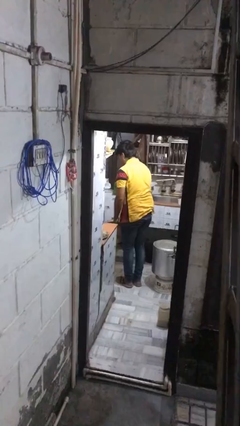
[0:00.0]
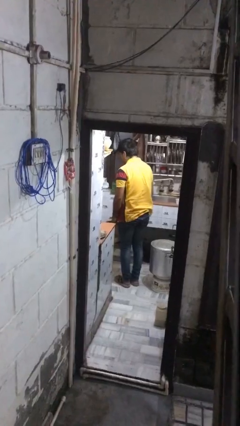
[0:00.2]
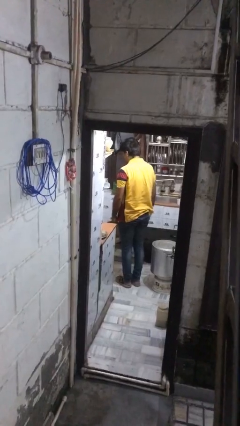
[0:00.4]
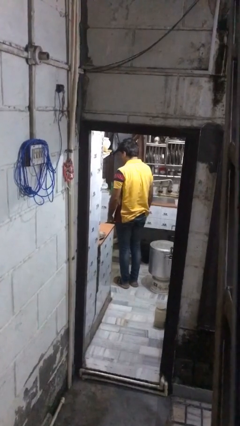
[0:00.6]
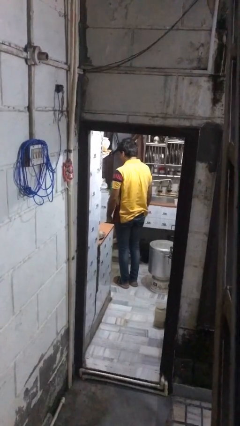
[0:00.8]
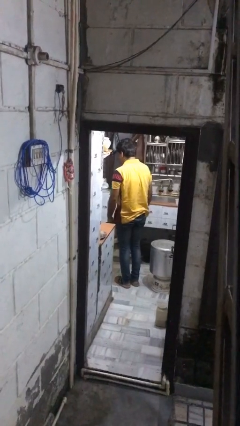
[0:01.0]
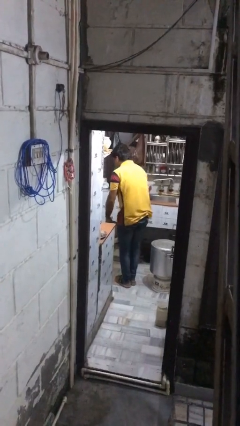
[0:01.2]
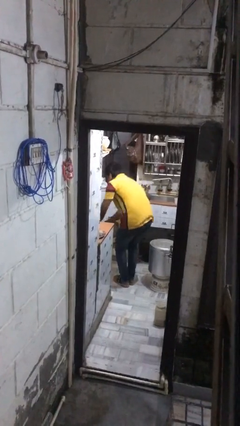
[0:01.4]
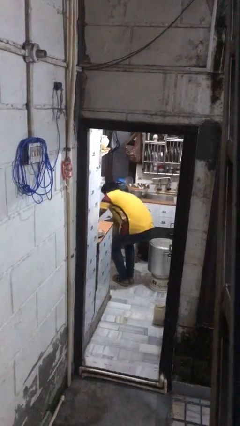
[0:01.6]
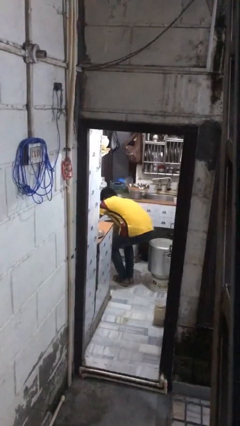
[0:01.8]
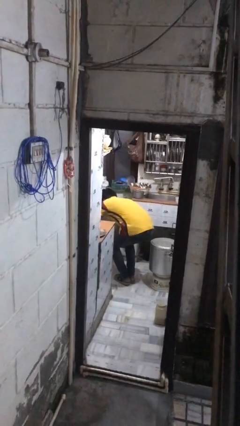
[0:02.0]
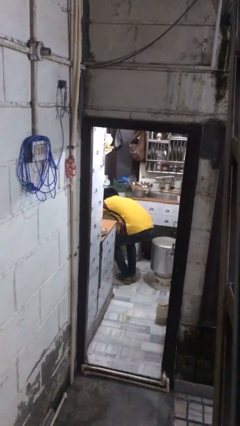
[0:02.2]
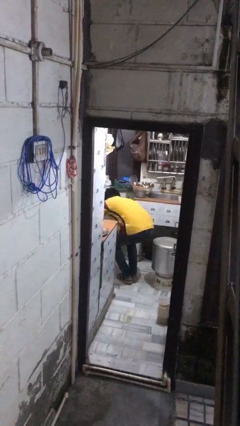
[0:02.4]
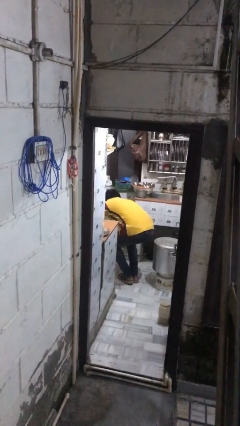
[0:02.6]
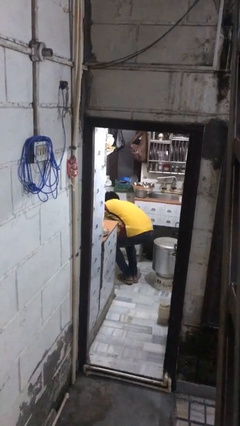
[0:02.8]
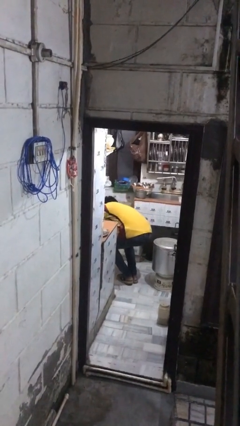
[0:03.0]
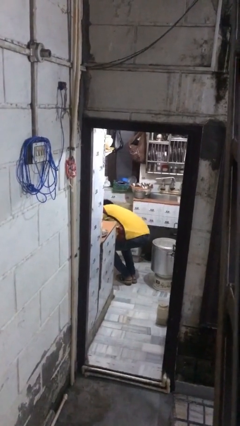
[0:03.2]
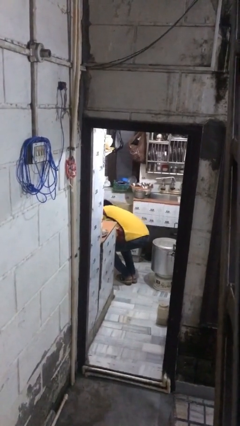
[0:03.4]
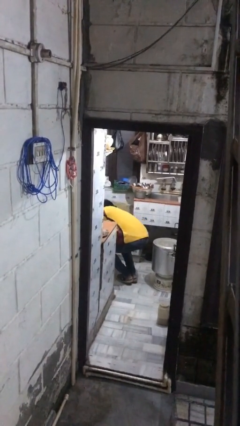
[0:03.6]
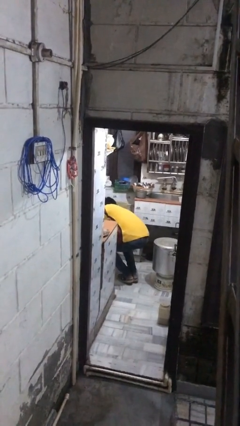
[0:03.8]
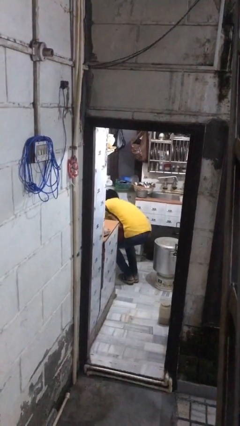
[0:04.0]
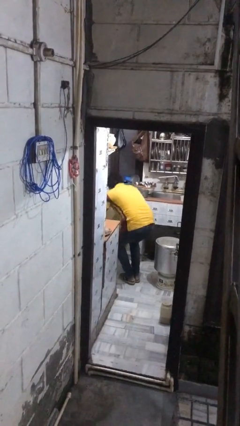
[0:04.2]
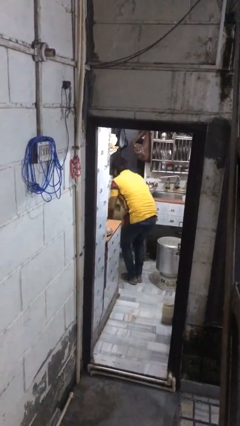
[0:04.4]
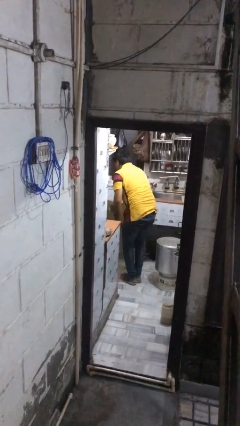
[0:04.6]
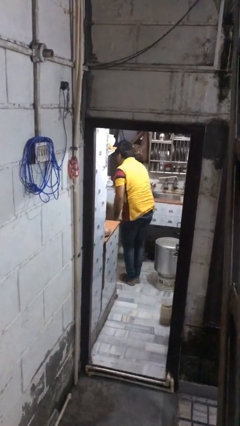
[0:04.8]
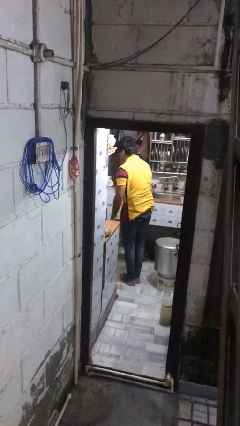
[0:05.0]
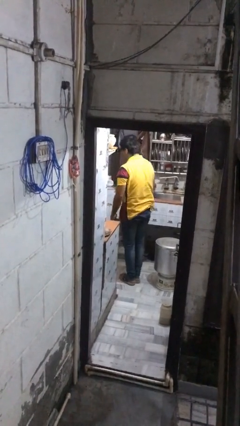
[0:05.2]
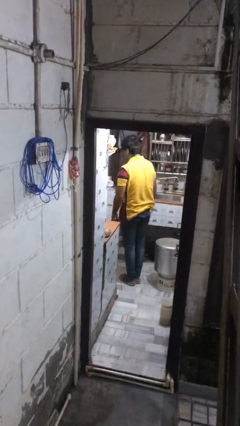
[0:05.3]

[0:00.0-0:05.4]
person searches in kitchen drawer

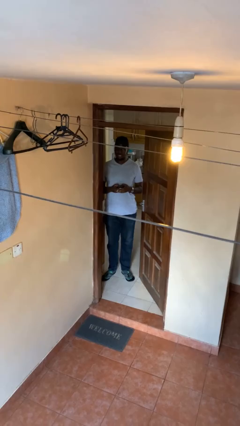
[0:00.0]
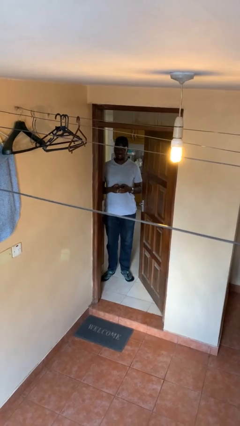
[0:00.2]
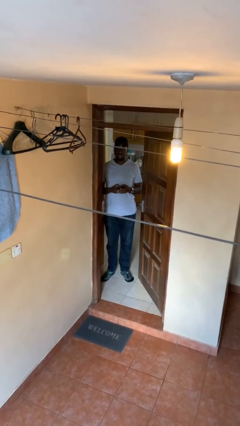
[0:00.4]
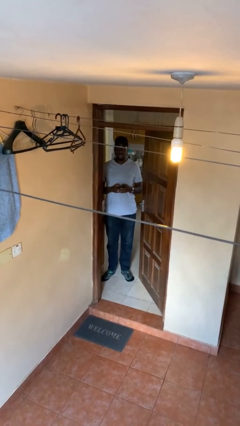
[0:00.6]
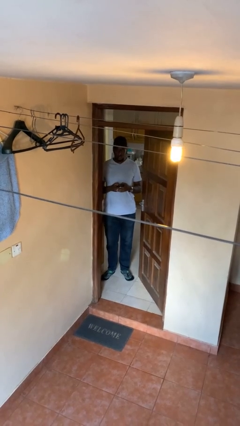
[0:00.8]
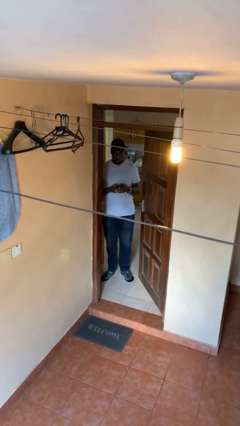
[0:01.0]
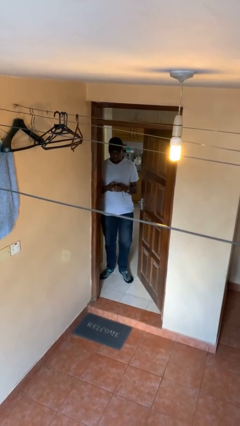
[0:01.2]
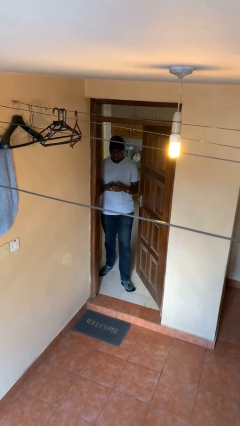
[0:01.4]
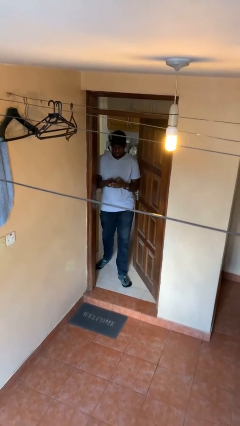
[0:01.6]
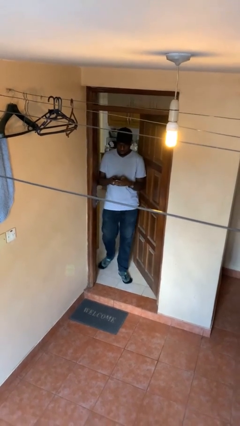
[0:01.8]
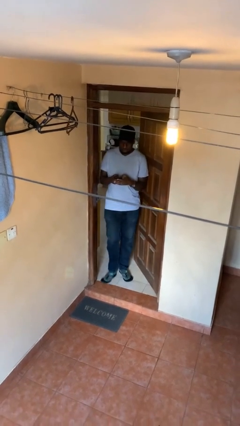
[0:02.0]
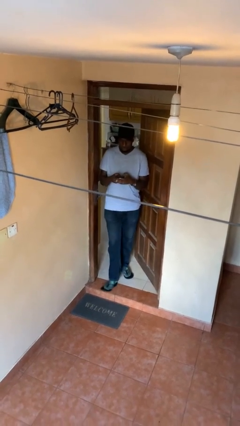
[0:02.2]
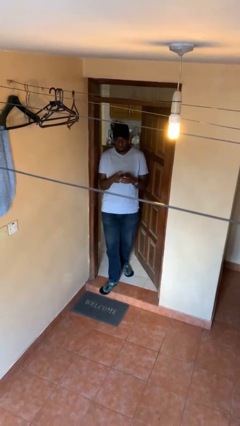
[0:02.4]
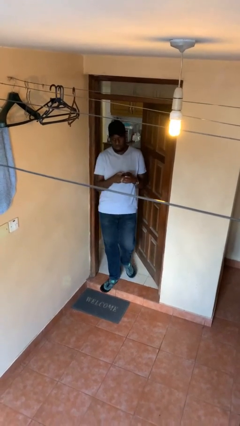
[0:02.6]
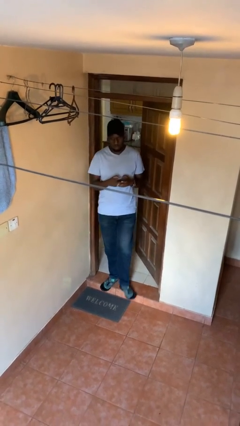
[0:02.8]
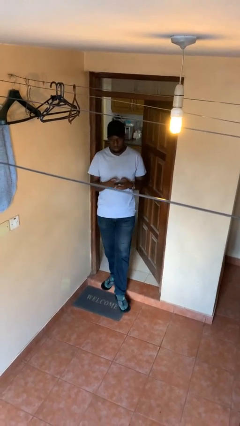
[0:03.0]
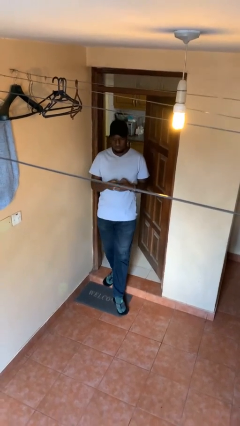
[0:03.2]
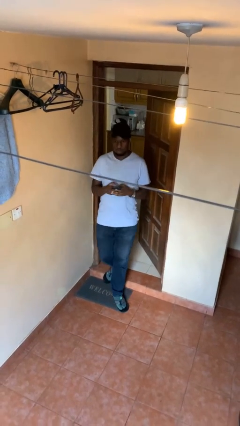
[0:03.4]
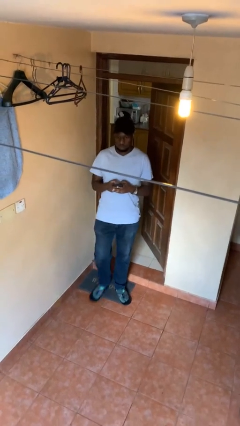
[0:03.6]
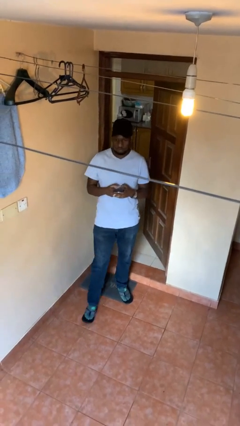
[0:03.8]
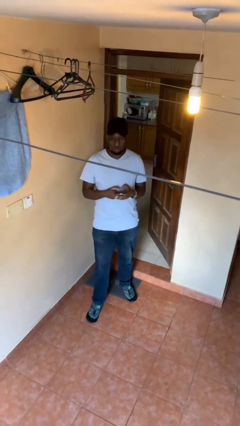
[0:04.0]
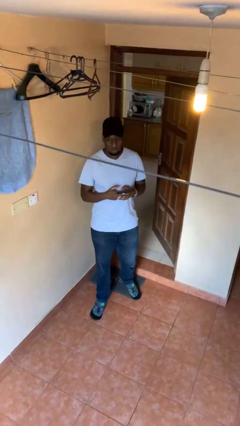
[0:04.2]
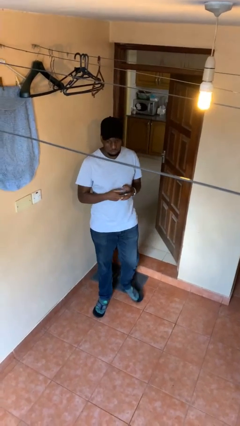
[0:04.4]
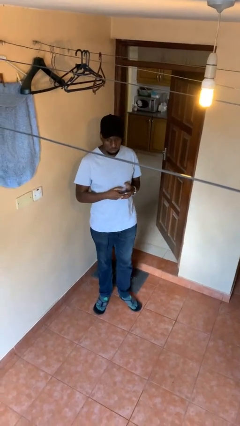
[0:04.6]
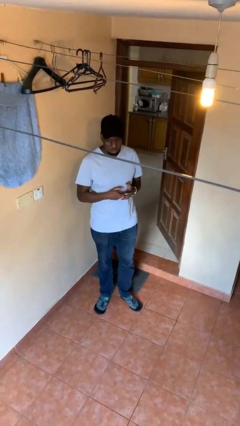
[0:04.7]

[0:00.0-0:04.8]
person enters scene through structure

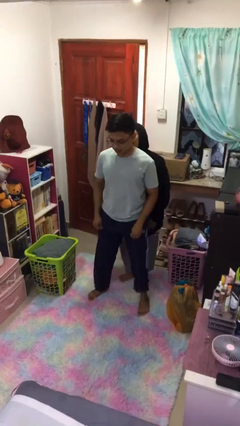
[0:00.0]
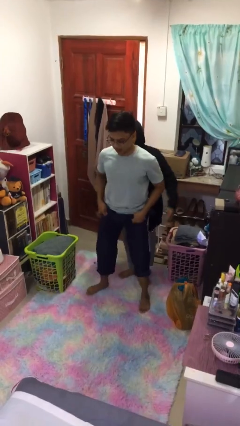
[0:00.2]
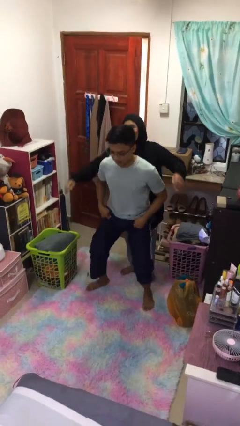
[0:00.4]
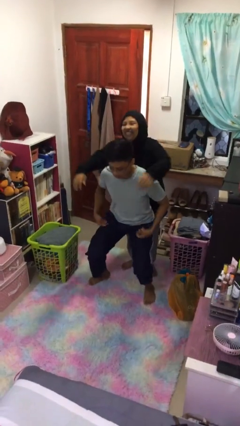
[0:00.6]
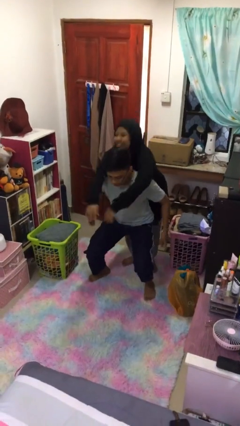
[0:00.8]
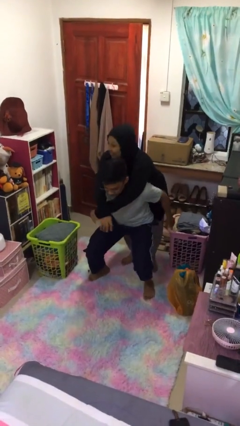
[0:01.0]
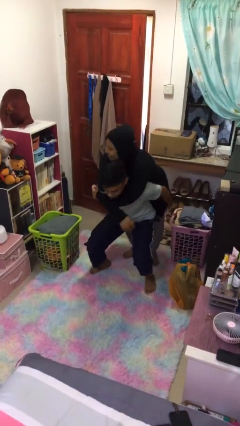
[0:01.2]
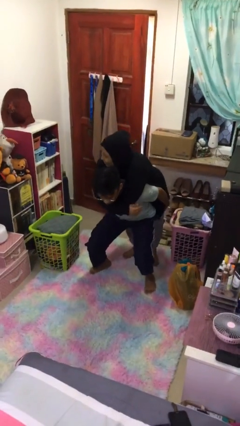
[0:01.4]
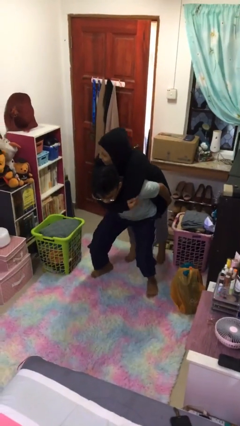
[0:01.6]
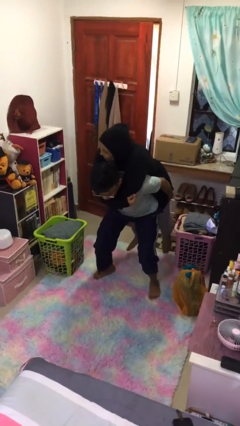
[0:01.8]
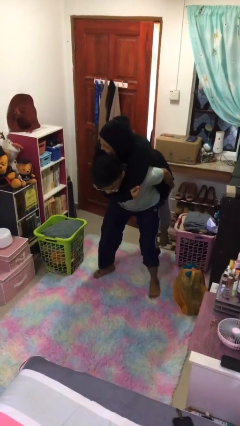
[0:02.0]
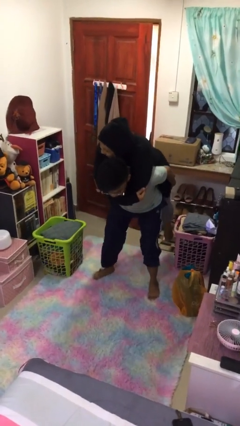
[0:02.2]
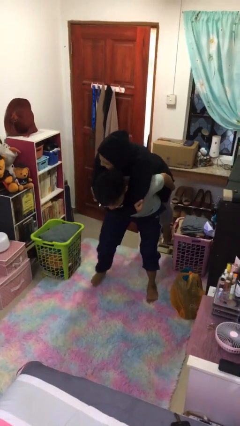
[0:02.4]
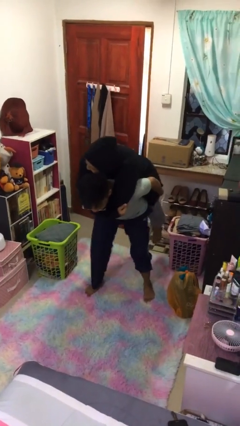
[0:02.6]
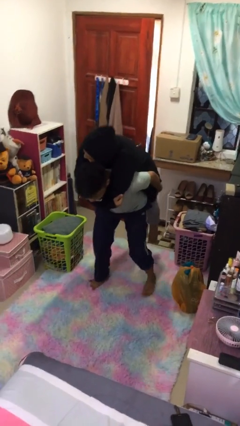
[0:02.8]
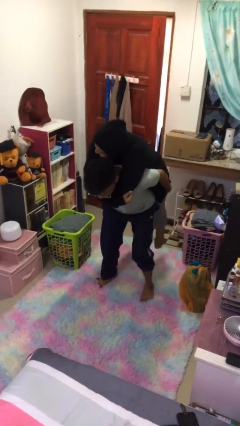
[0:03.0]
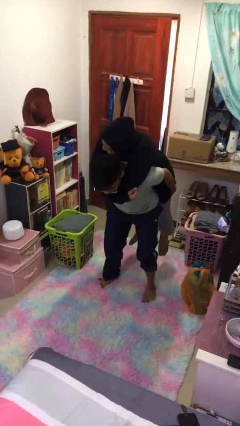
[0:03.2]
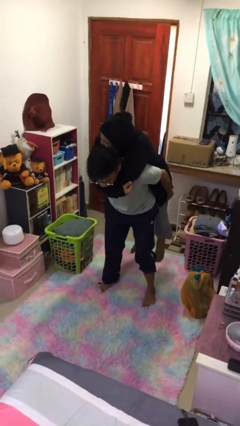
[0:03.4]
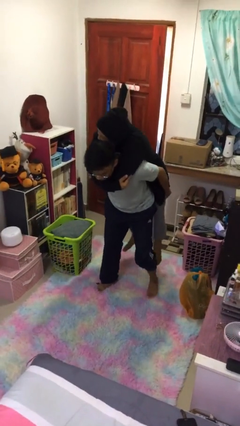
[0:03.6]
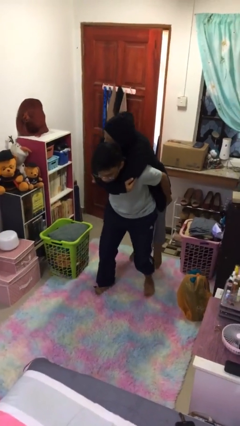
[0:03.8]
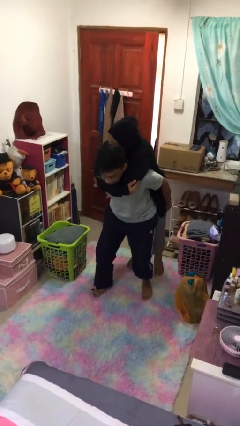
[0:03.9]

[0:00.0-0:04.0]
person carries person on back

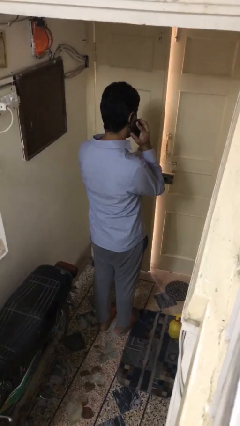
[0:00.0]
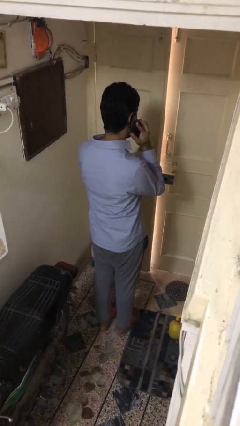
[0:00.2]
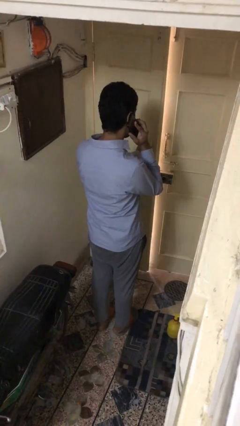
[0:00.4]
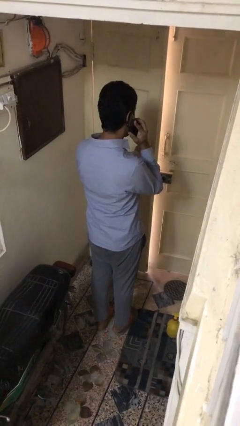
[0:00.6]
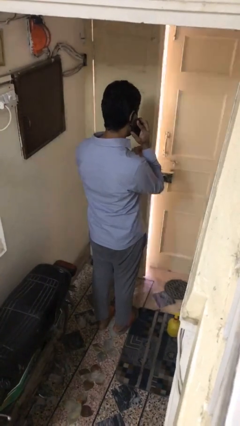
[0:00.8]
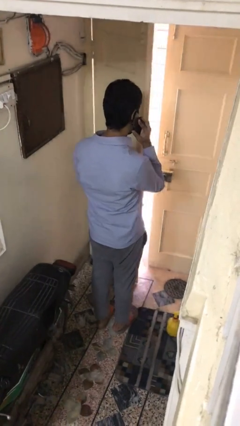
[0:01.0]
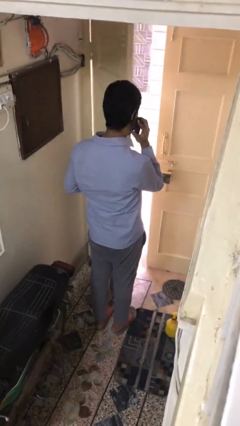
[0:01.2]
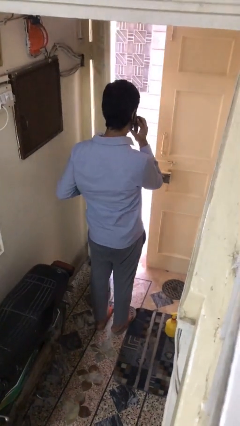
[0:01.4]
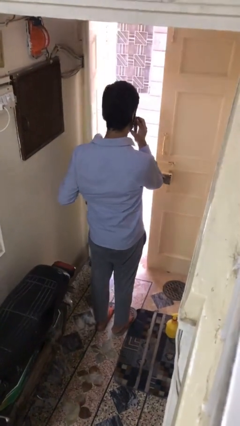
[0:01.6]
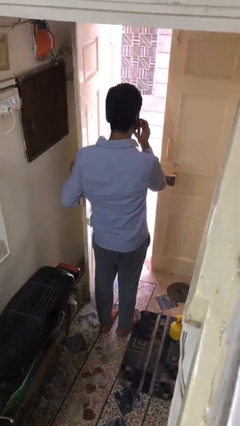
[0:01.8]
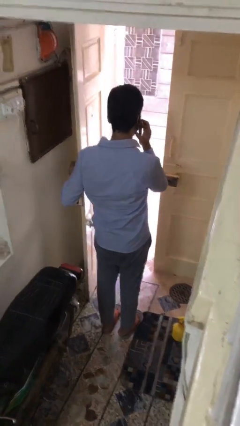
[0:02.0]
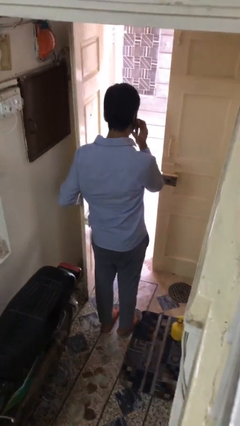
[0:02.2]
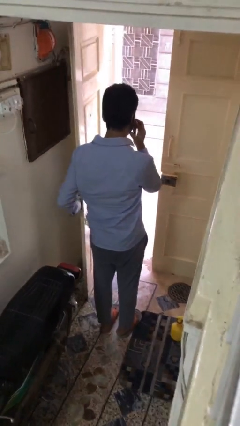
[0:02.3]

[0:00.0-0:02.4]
person opens facility door

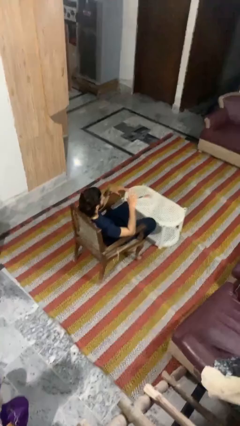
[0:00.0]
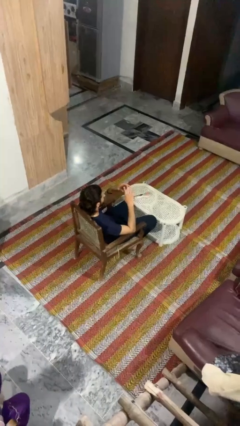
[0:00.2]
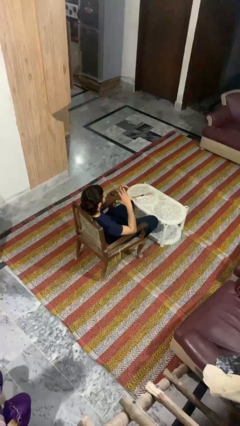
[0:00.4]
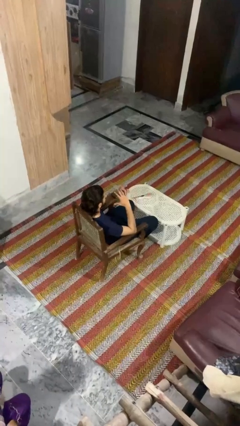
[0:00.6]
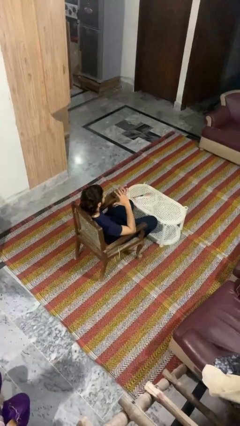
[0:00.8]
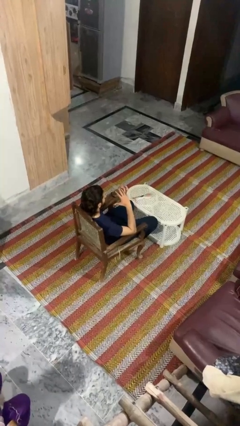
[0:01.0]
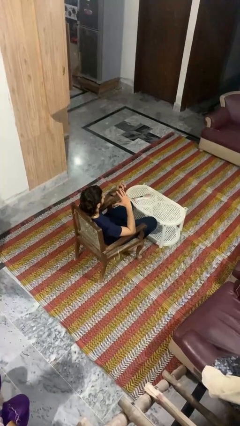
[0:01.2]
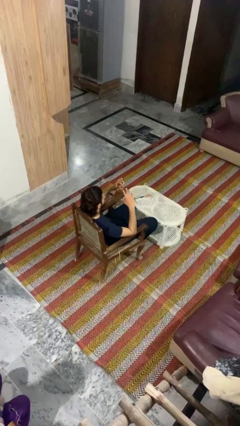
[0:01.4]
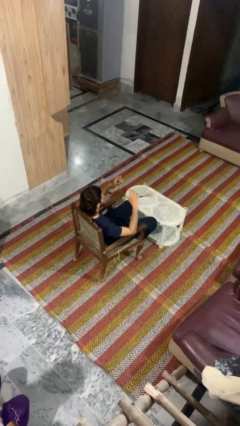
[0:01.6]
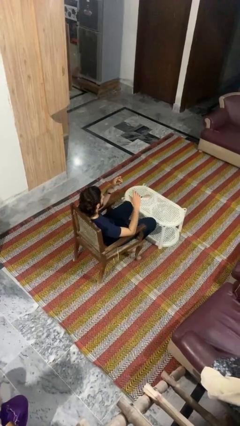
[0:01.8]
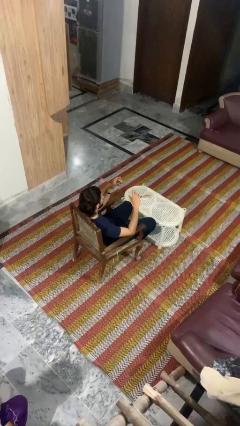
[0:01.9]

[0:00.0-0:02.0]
person takes off ring
